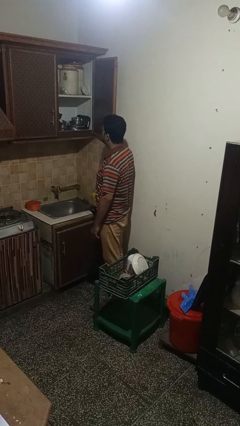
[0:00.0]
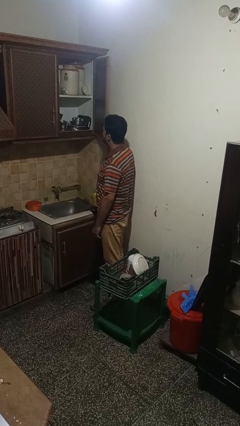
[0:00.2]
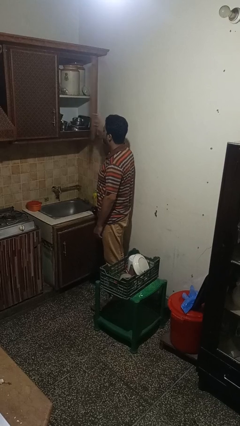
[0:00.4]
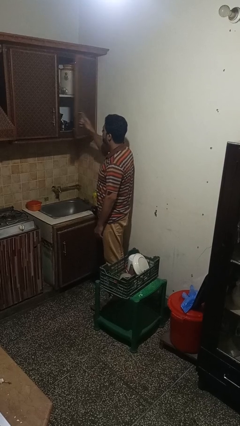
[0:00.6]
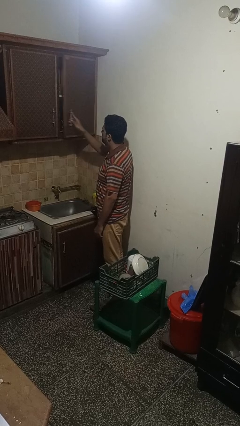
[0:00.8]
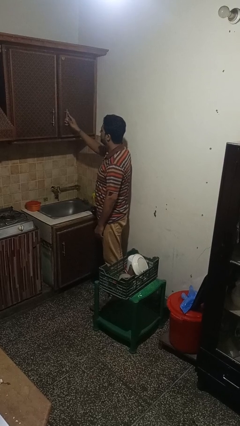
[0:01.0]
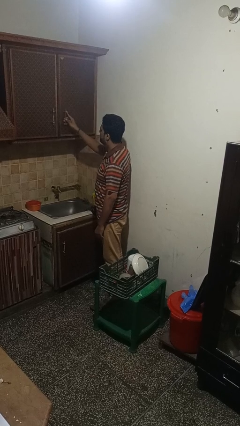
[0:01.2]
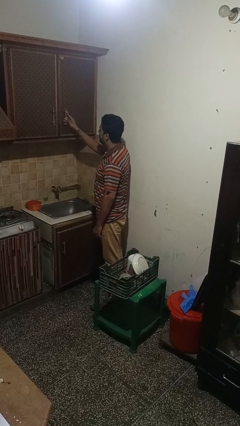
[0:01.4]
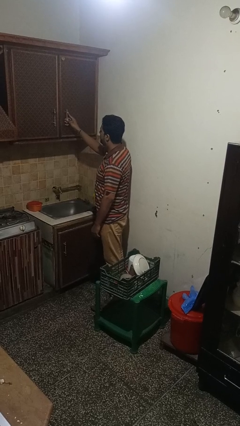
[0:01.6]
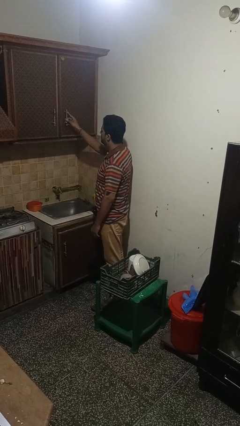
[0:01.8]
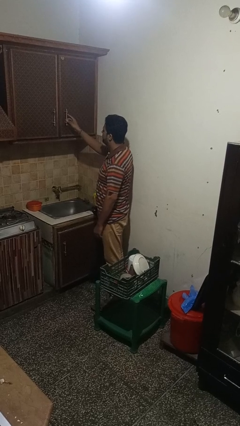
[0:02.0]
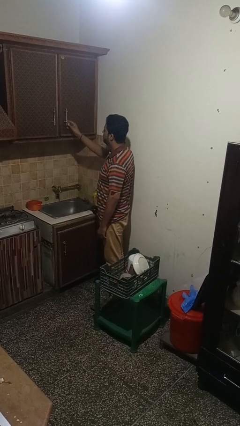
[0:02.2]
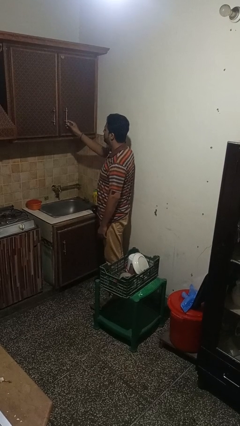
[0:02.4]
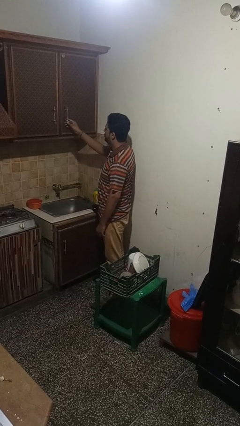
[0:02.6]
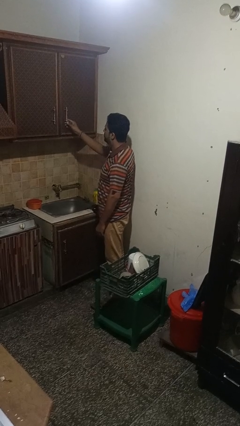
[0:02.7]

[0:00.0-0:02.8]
person closes cabinet

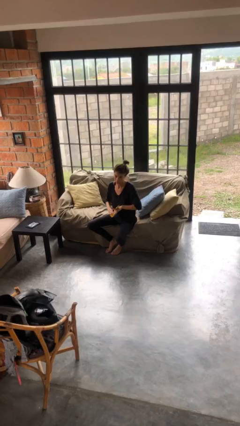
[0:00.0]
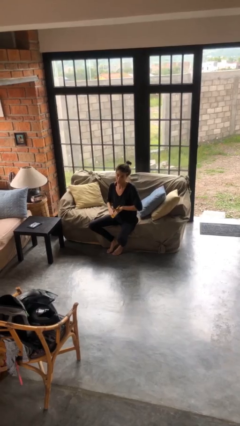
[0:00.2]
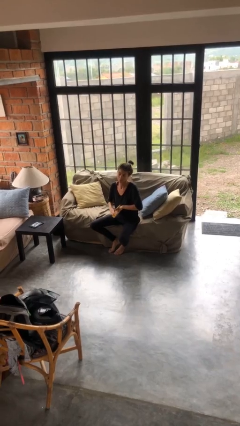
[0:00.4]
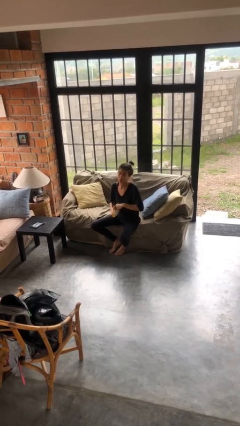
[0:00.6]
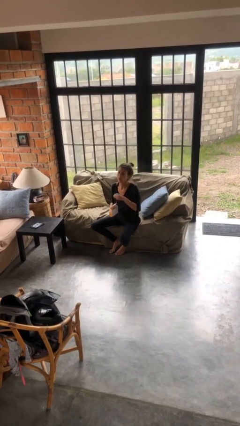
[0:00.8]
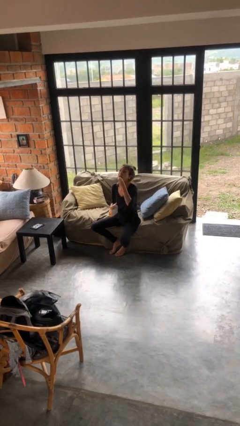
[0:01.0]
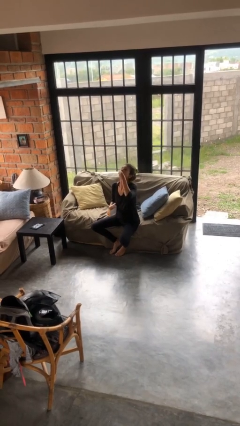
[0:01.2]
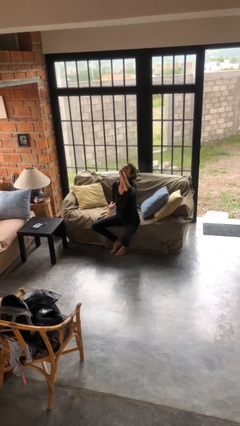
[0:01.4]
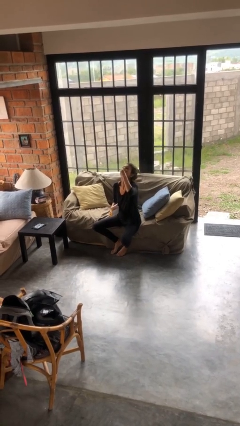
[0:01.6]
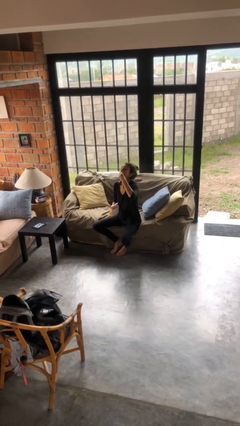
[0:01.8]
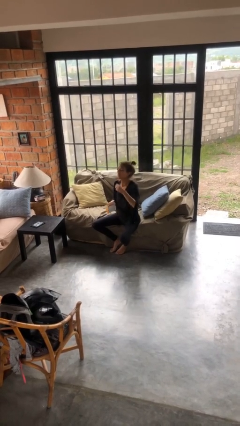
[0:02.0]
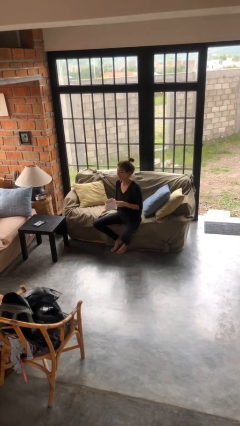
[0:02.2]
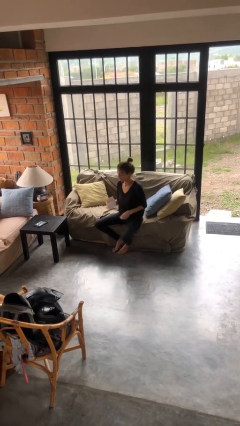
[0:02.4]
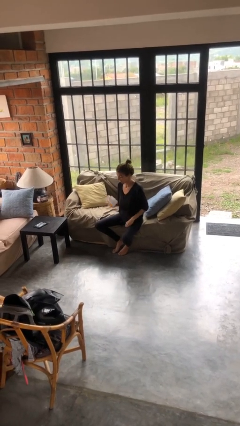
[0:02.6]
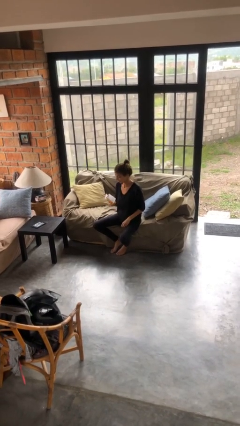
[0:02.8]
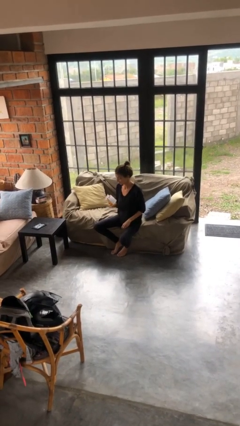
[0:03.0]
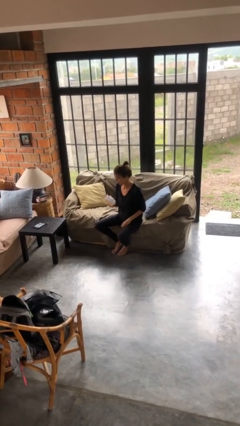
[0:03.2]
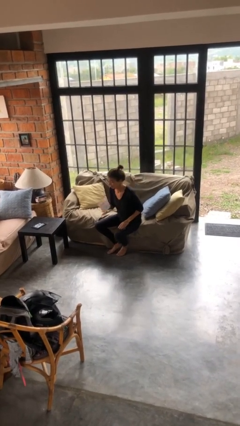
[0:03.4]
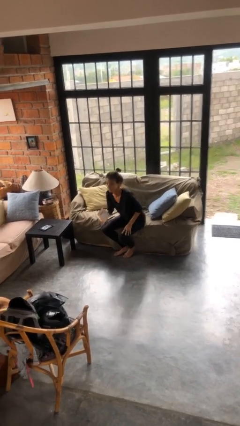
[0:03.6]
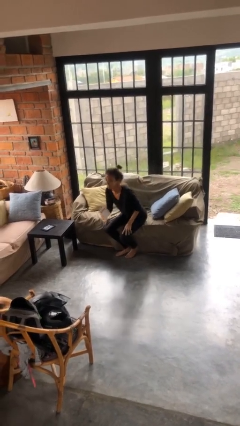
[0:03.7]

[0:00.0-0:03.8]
person eats snack from bag

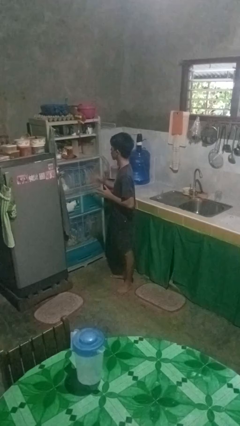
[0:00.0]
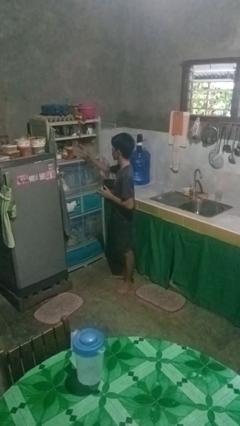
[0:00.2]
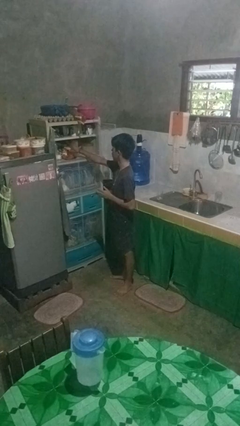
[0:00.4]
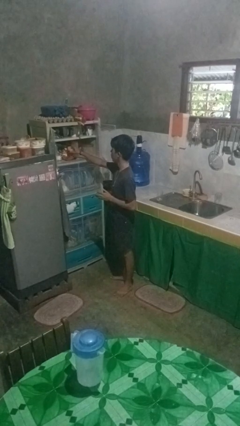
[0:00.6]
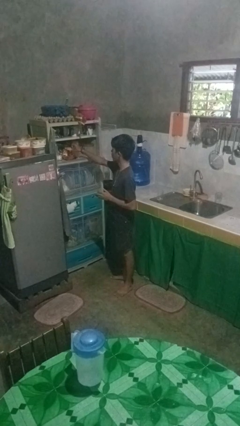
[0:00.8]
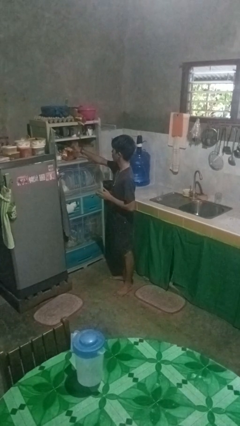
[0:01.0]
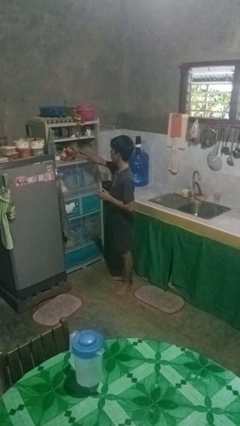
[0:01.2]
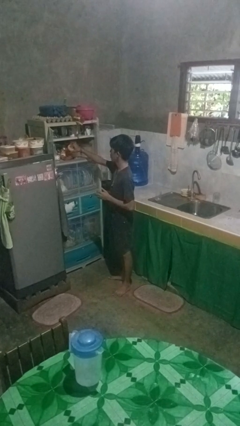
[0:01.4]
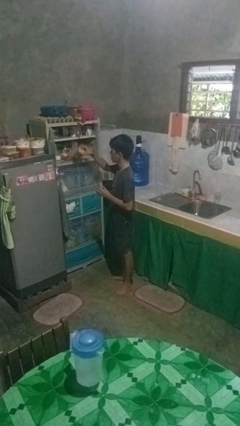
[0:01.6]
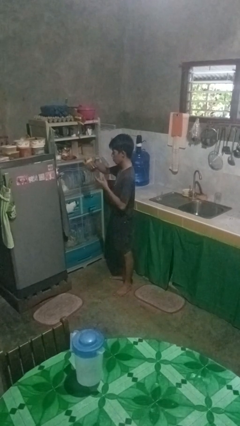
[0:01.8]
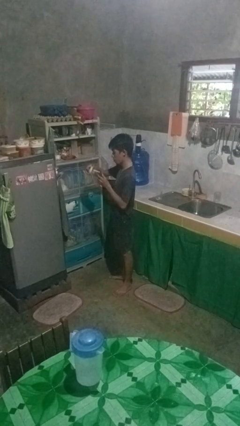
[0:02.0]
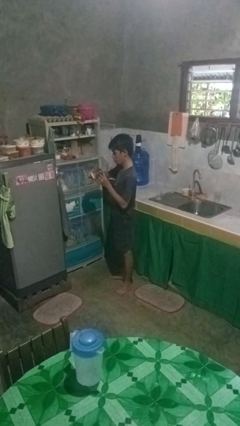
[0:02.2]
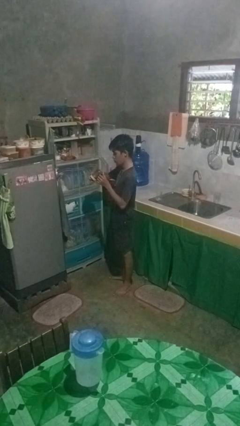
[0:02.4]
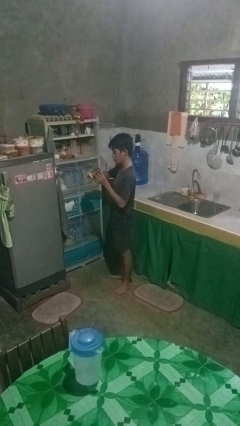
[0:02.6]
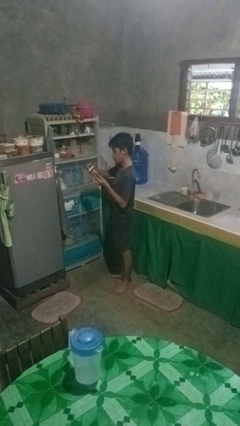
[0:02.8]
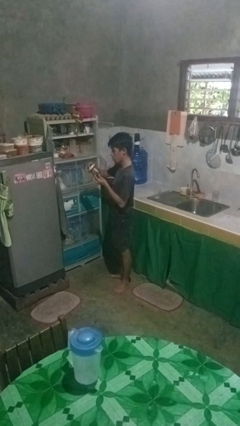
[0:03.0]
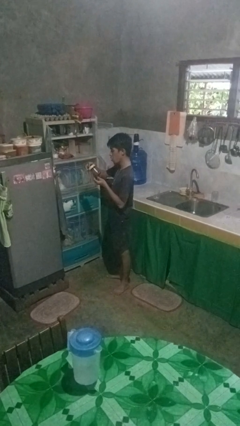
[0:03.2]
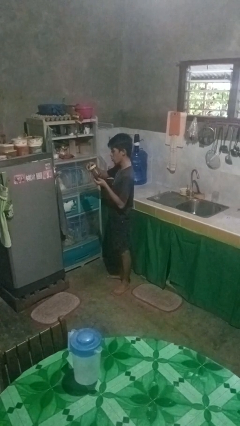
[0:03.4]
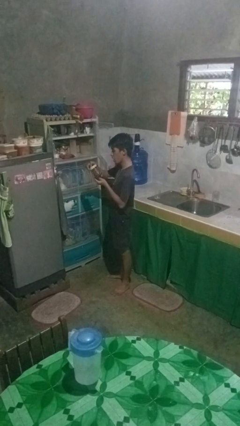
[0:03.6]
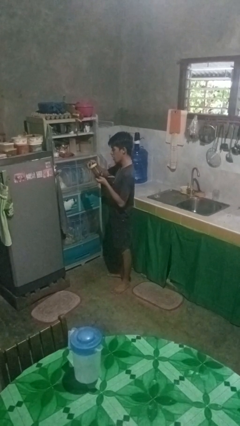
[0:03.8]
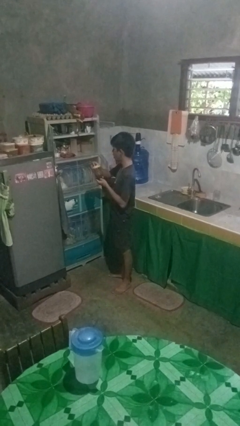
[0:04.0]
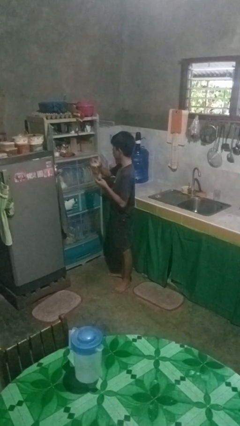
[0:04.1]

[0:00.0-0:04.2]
person takes object from cabinet

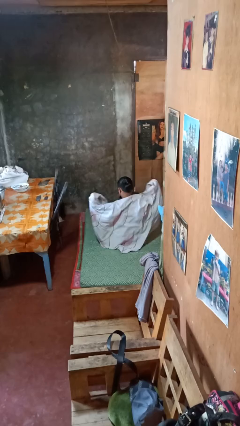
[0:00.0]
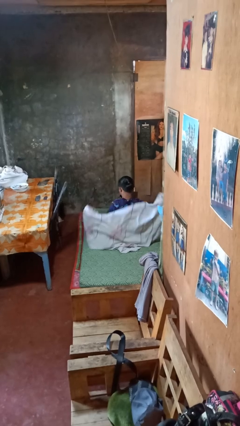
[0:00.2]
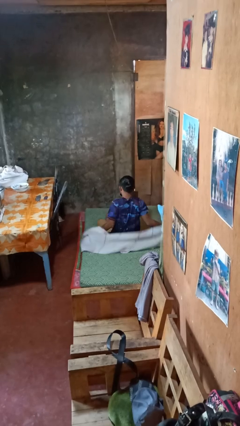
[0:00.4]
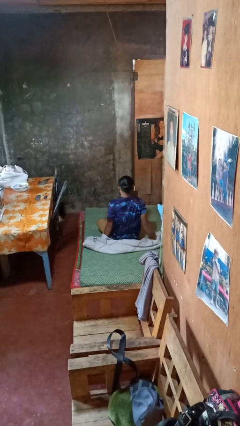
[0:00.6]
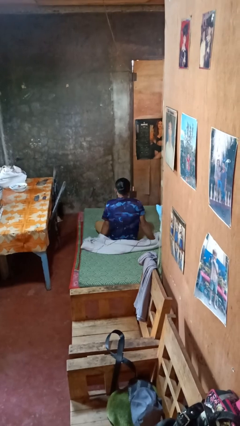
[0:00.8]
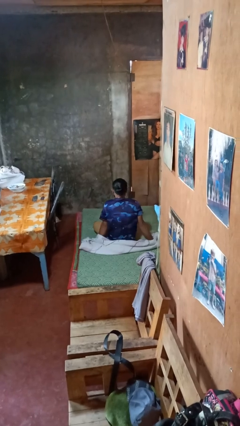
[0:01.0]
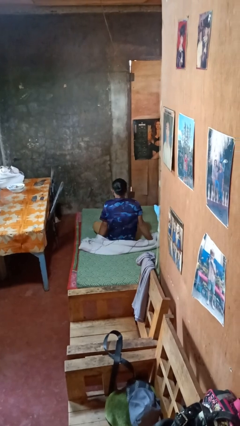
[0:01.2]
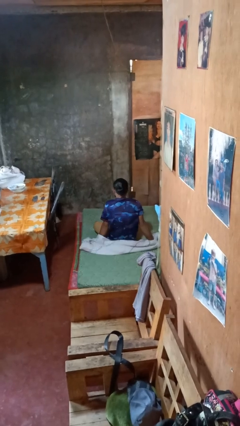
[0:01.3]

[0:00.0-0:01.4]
person uncovers with blanket

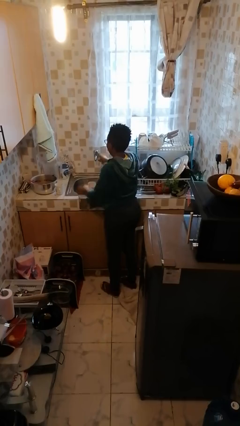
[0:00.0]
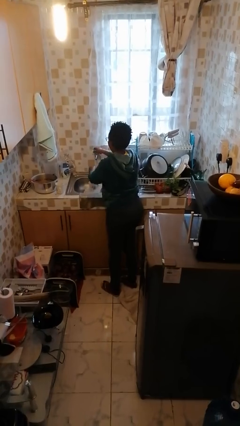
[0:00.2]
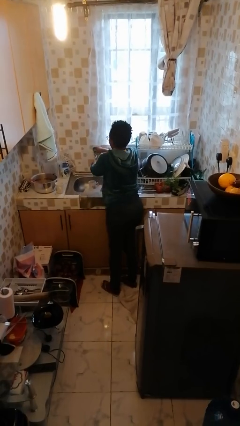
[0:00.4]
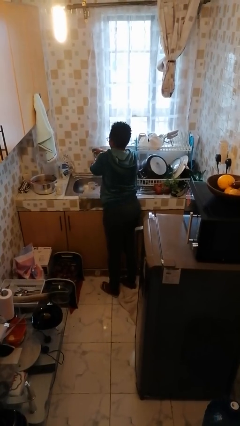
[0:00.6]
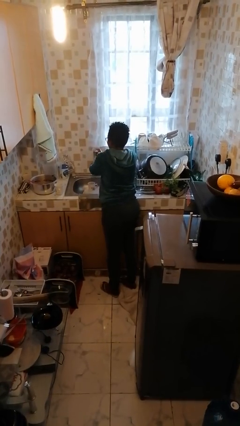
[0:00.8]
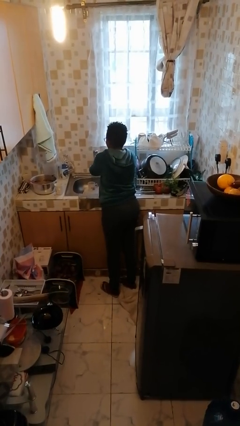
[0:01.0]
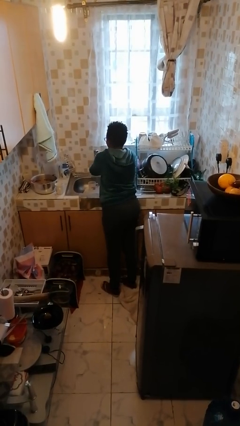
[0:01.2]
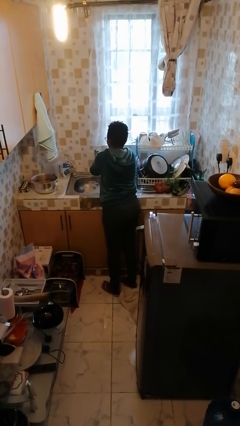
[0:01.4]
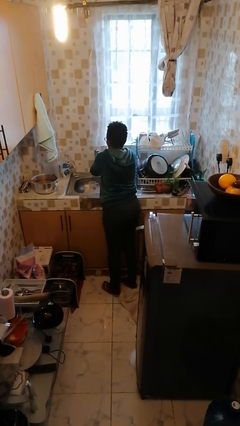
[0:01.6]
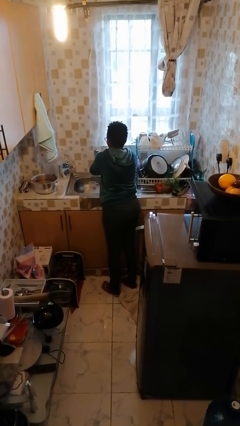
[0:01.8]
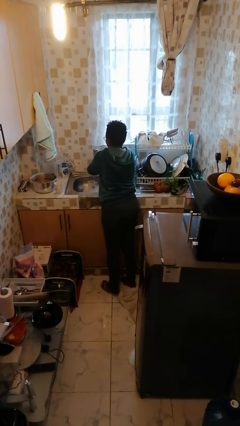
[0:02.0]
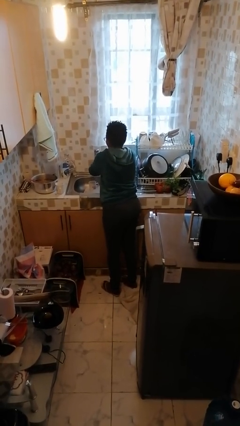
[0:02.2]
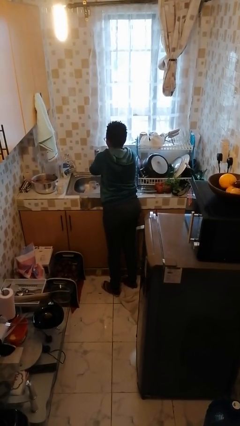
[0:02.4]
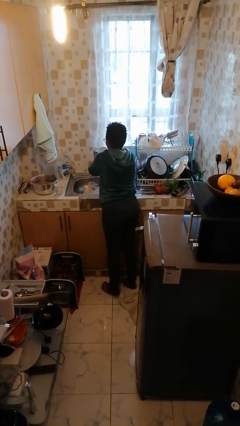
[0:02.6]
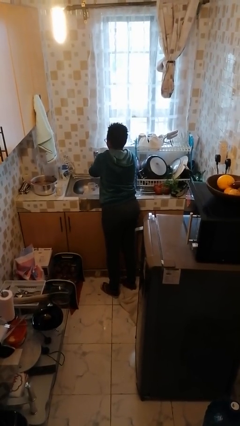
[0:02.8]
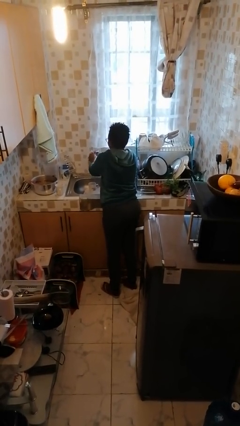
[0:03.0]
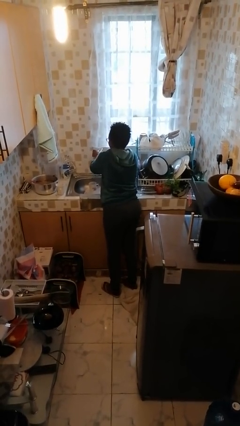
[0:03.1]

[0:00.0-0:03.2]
person washes hands

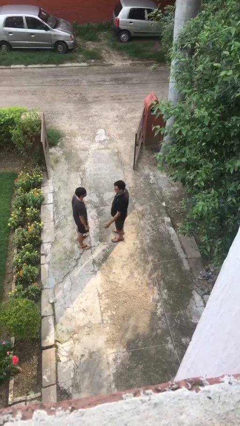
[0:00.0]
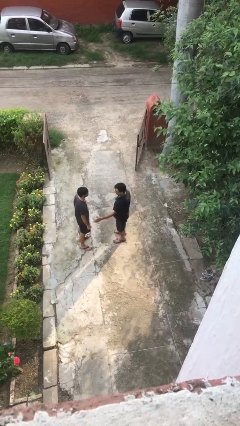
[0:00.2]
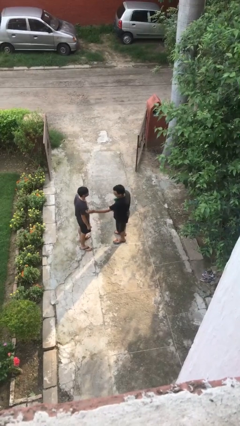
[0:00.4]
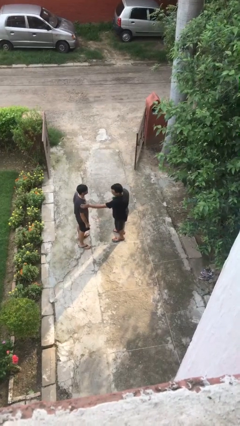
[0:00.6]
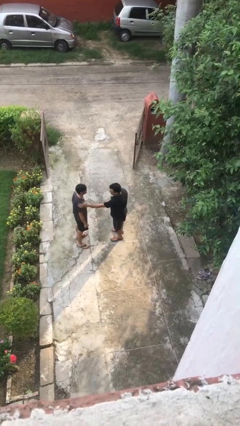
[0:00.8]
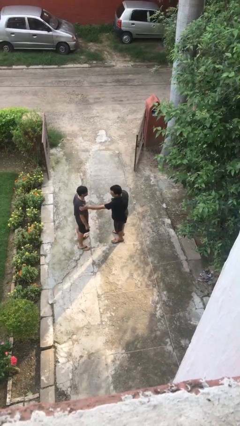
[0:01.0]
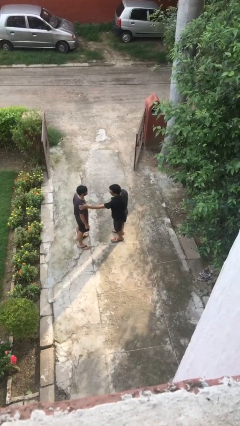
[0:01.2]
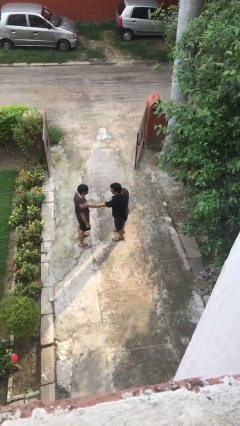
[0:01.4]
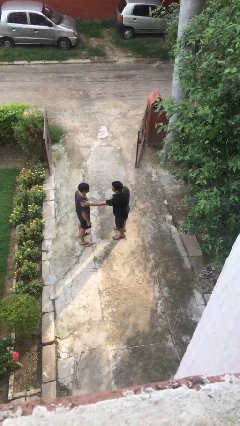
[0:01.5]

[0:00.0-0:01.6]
person pounds shoulders of person

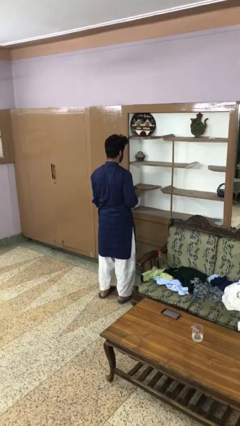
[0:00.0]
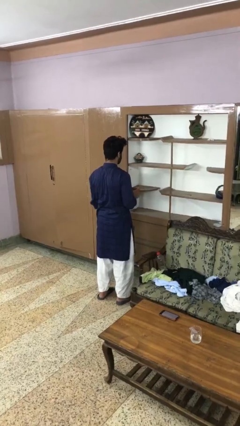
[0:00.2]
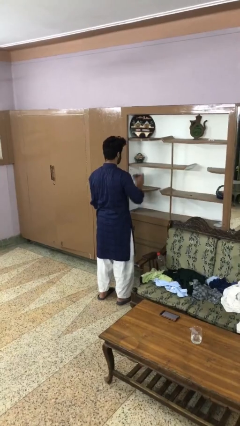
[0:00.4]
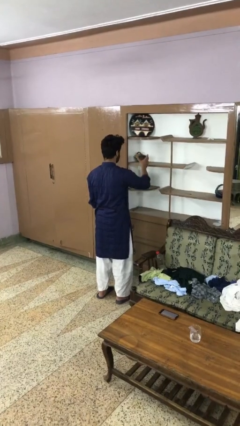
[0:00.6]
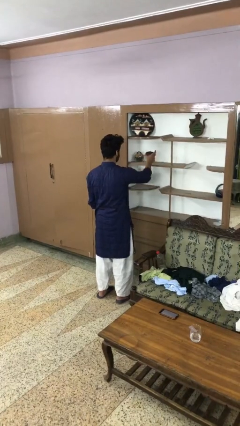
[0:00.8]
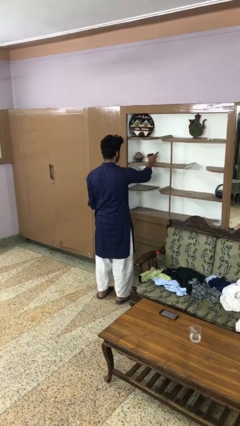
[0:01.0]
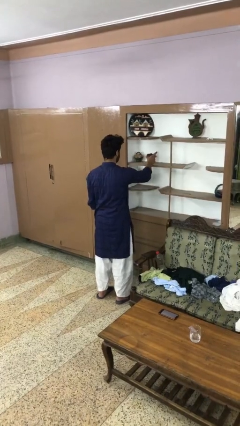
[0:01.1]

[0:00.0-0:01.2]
person puts down object on shelf
